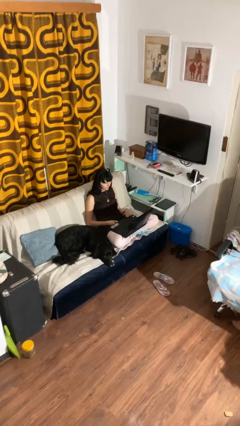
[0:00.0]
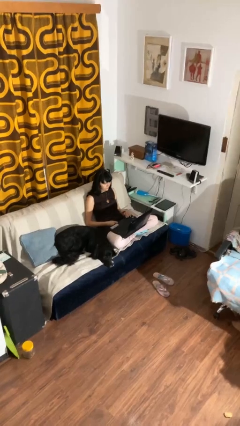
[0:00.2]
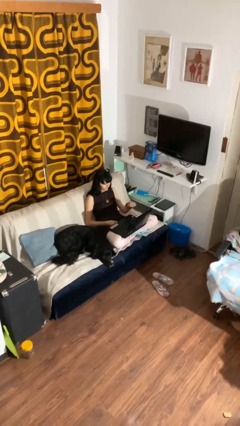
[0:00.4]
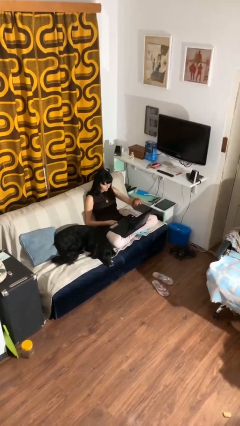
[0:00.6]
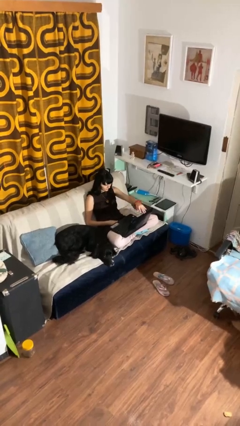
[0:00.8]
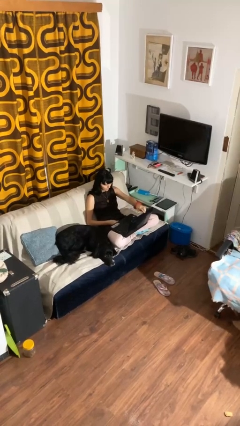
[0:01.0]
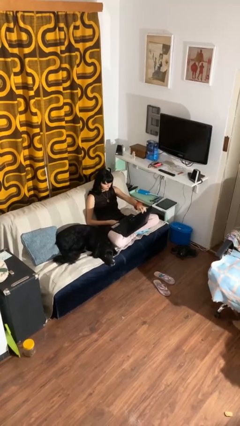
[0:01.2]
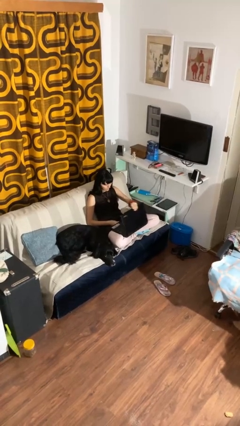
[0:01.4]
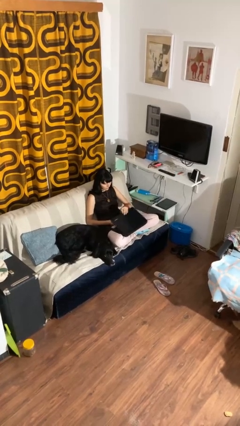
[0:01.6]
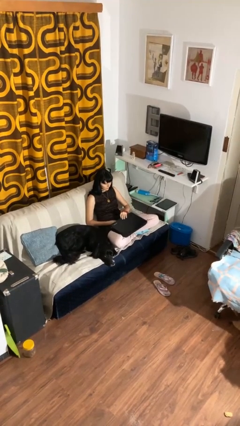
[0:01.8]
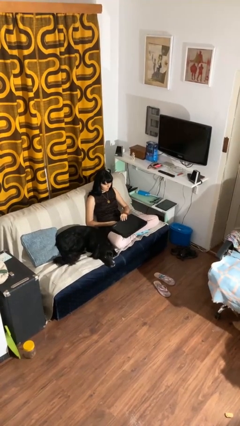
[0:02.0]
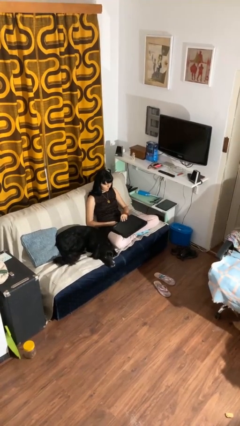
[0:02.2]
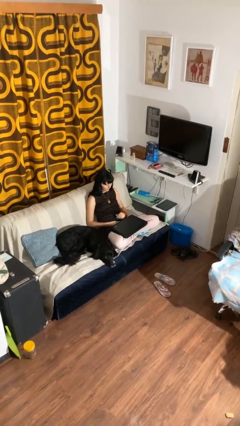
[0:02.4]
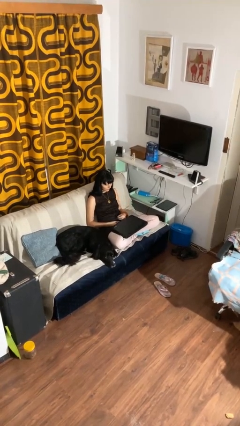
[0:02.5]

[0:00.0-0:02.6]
person closes laptop

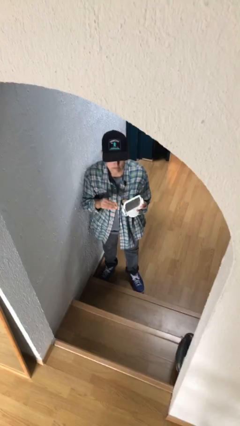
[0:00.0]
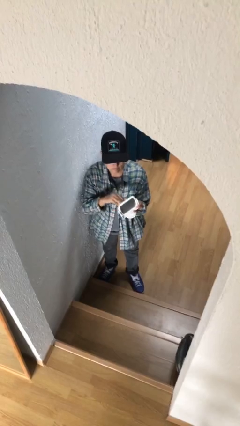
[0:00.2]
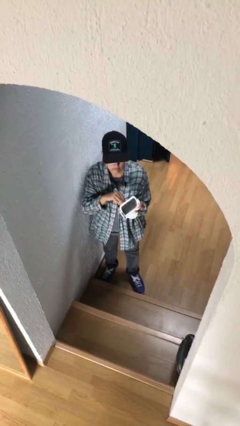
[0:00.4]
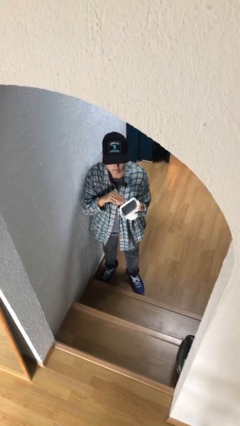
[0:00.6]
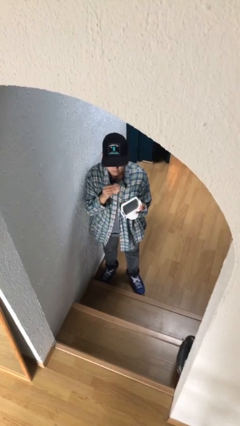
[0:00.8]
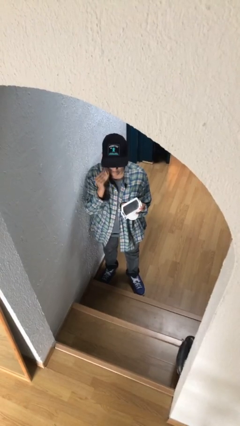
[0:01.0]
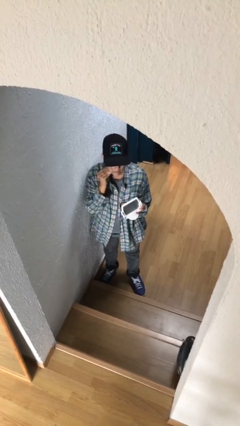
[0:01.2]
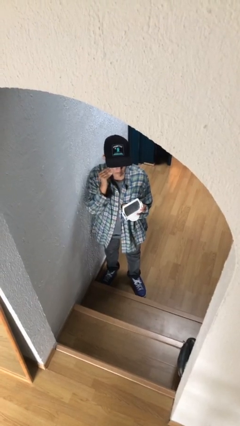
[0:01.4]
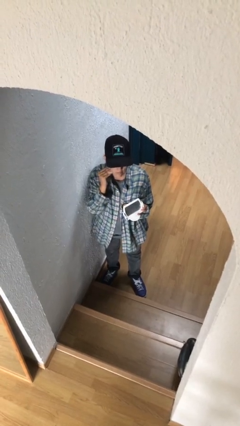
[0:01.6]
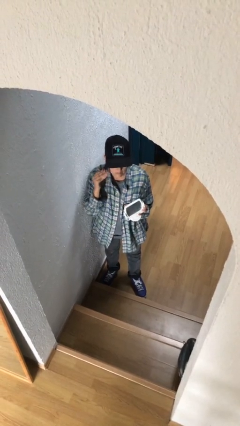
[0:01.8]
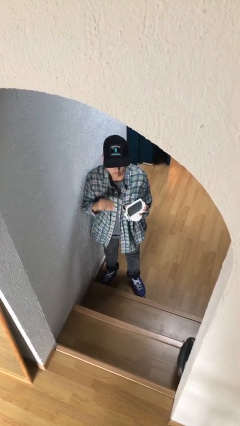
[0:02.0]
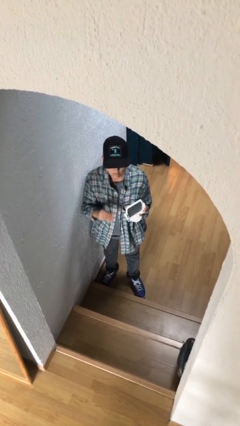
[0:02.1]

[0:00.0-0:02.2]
person applies foundation makeup

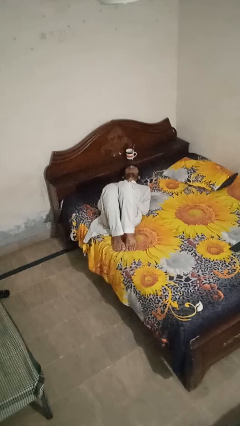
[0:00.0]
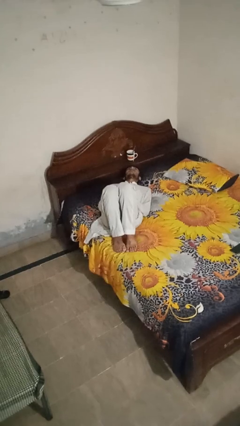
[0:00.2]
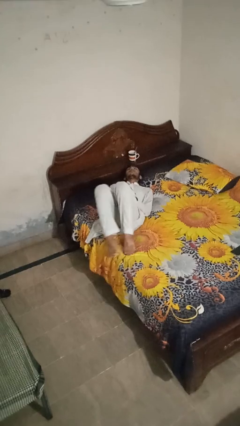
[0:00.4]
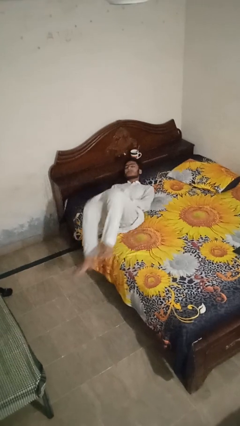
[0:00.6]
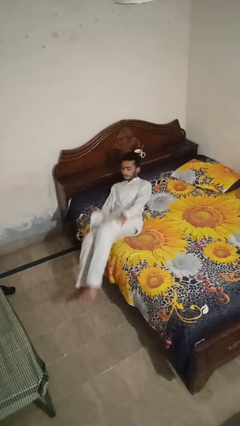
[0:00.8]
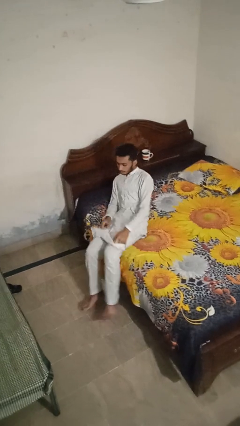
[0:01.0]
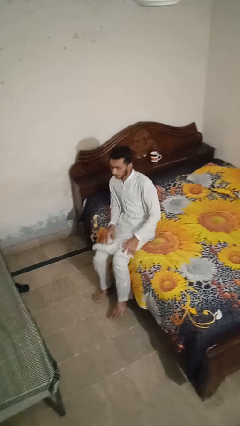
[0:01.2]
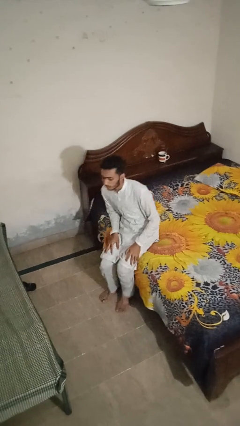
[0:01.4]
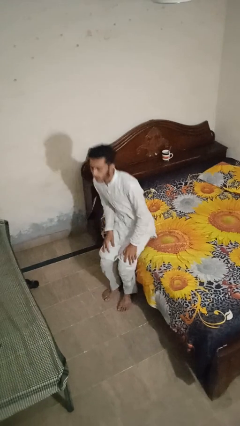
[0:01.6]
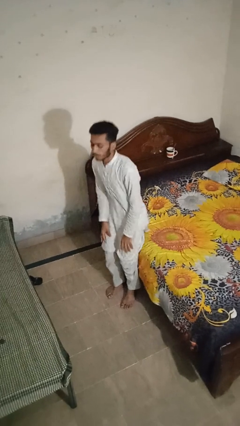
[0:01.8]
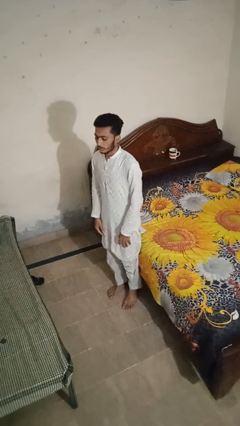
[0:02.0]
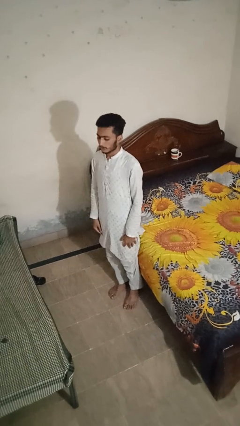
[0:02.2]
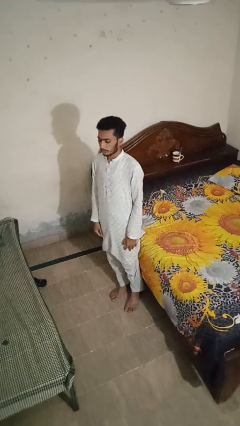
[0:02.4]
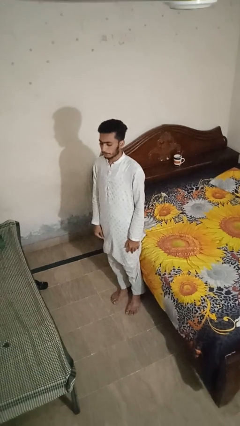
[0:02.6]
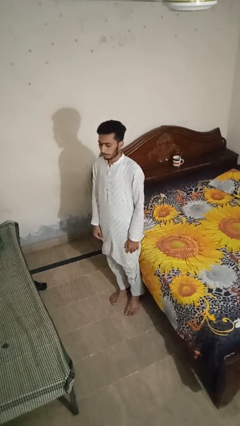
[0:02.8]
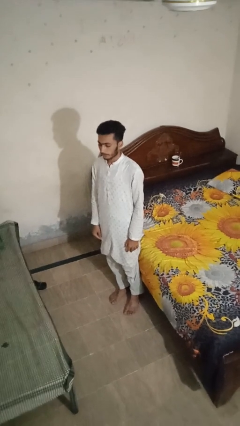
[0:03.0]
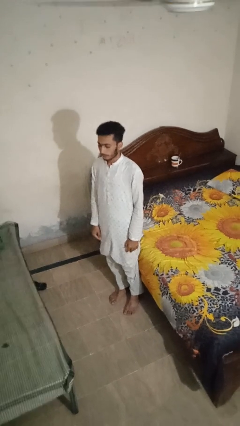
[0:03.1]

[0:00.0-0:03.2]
person stands up

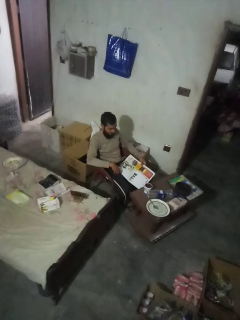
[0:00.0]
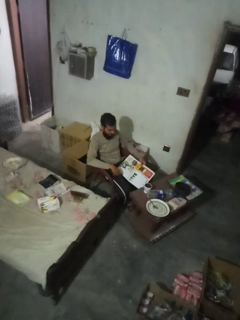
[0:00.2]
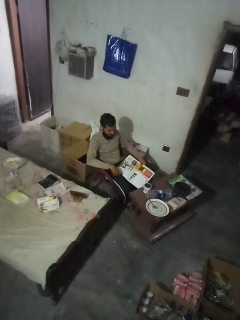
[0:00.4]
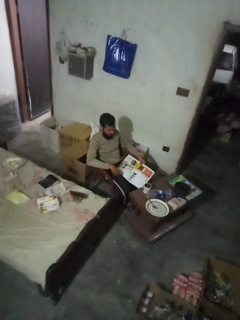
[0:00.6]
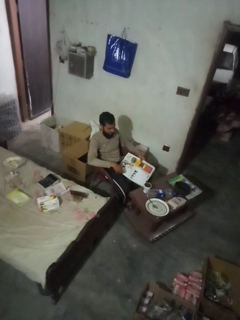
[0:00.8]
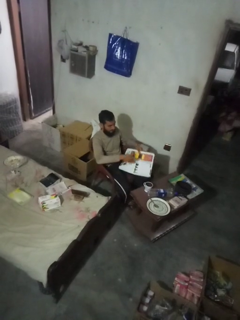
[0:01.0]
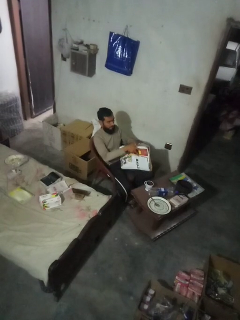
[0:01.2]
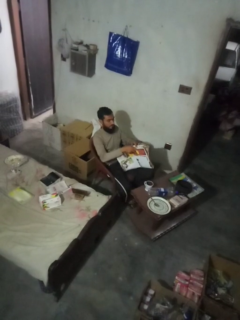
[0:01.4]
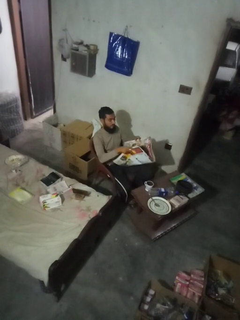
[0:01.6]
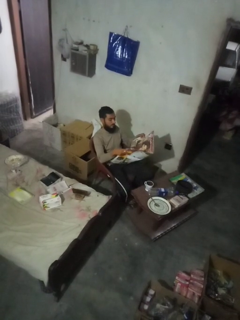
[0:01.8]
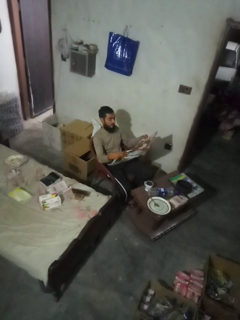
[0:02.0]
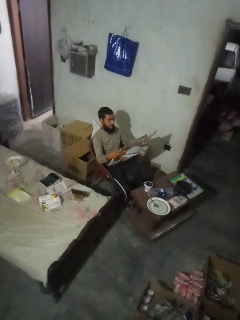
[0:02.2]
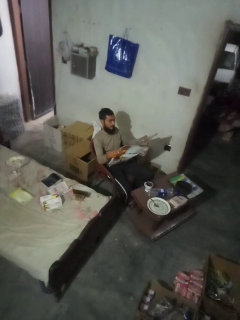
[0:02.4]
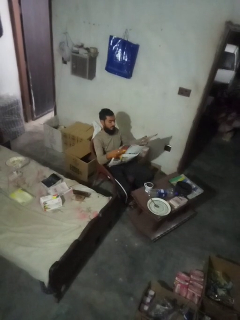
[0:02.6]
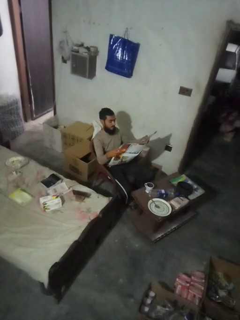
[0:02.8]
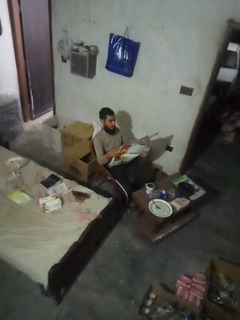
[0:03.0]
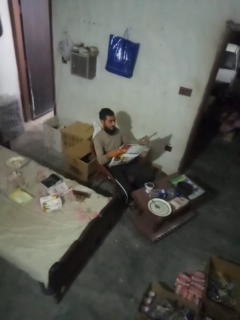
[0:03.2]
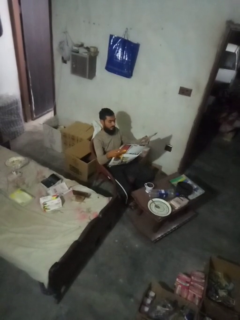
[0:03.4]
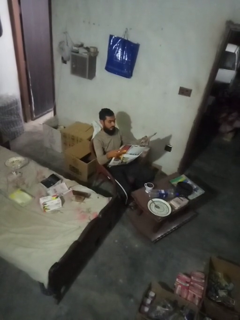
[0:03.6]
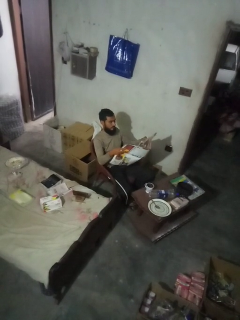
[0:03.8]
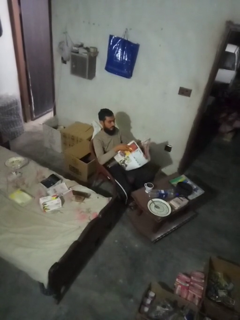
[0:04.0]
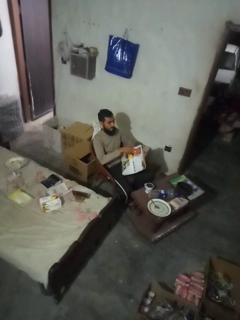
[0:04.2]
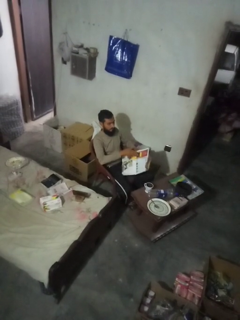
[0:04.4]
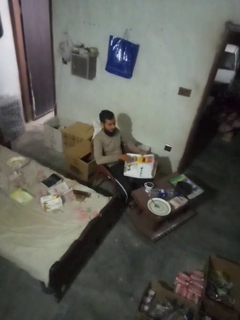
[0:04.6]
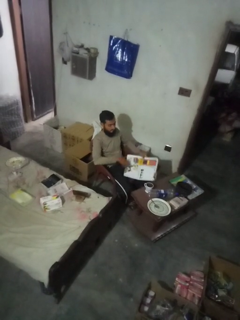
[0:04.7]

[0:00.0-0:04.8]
person reads newspaper

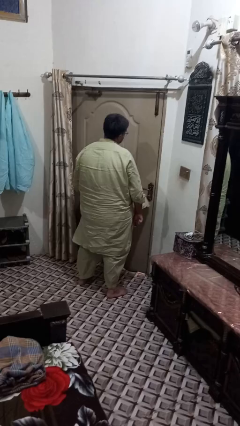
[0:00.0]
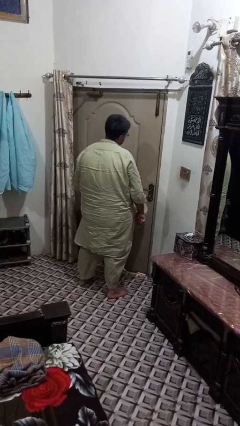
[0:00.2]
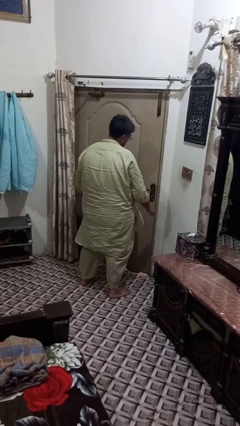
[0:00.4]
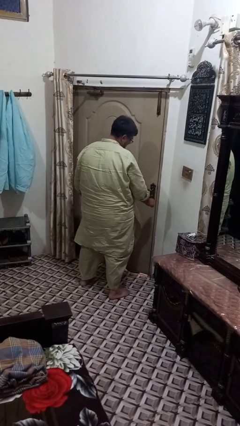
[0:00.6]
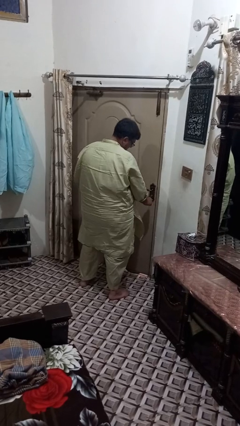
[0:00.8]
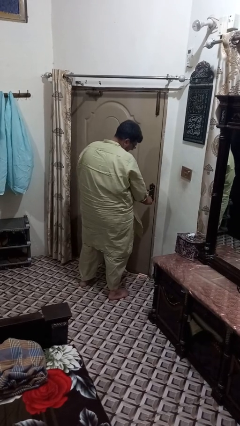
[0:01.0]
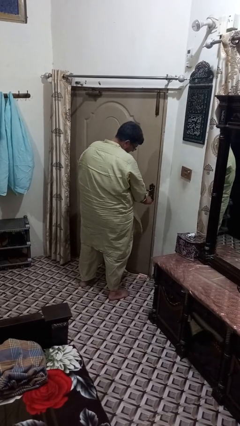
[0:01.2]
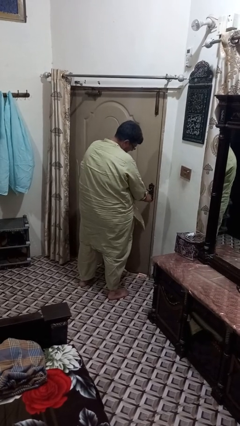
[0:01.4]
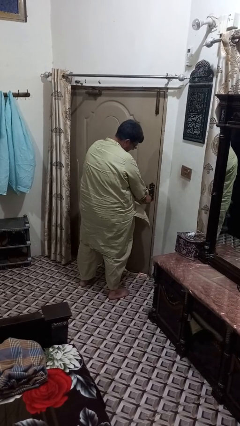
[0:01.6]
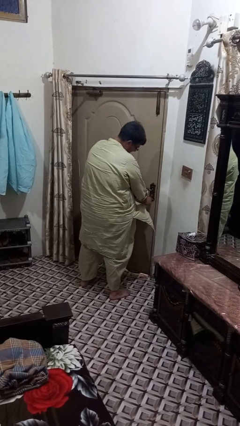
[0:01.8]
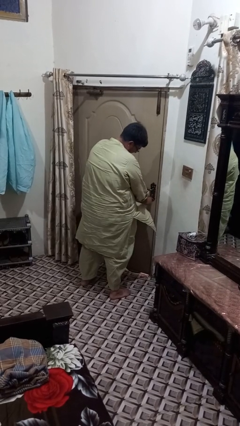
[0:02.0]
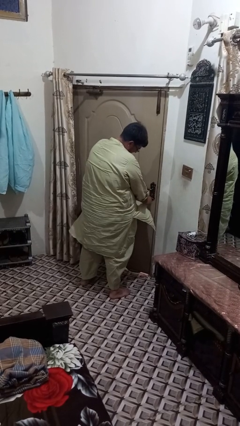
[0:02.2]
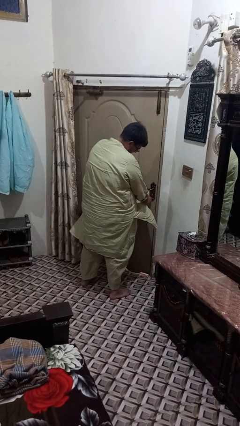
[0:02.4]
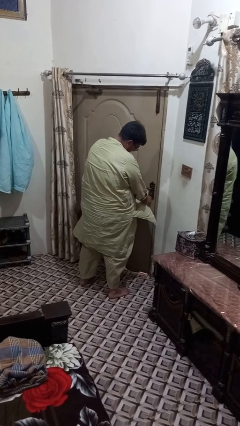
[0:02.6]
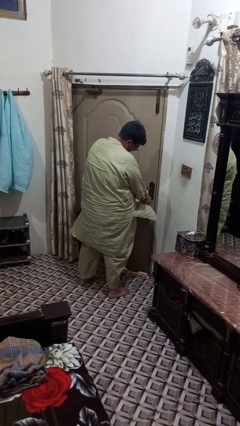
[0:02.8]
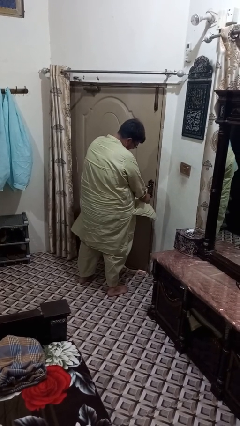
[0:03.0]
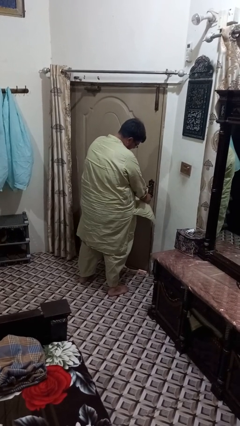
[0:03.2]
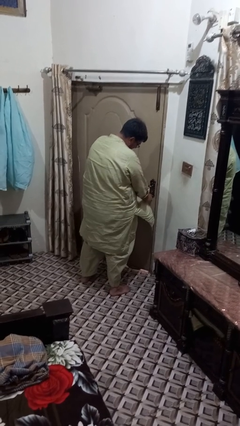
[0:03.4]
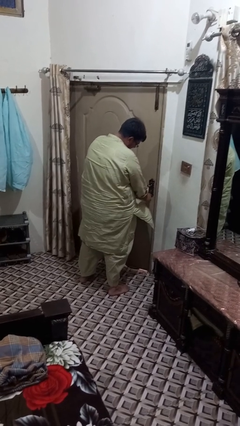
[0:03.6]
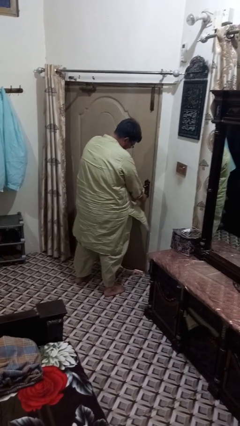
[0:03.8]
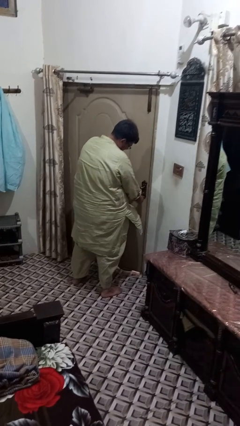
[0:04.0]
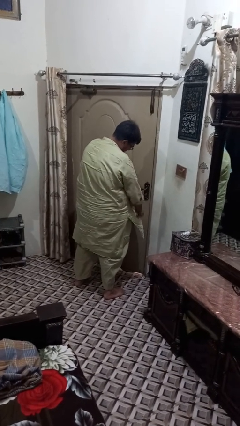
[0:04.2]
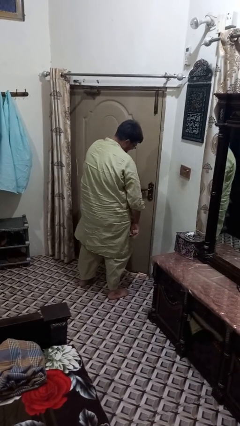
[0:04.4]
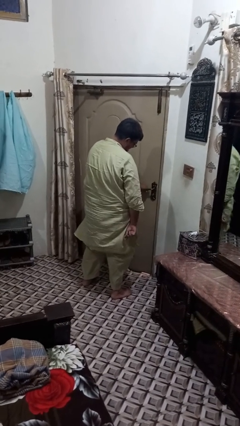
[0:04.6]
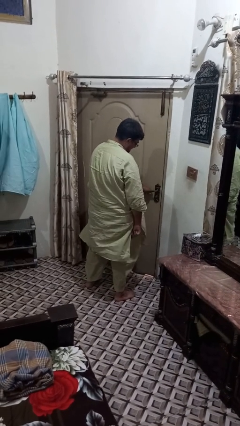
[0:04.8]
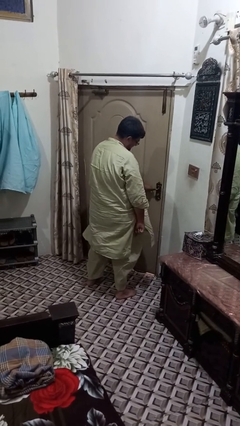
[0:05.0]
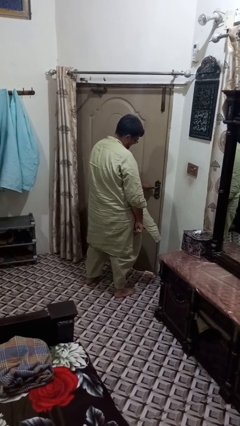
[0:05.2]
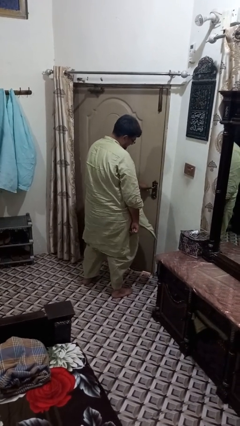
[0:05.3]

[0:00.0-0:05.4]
person unlocks door with keys

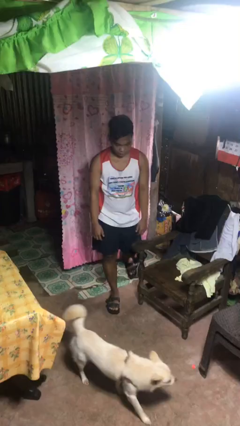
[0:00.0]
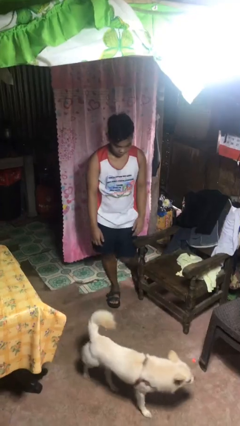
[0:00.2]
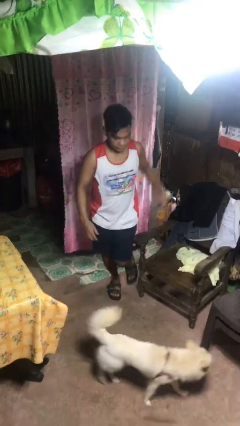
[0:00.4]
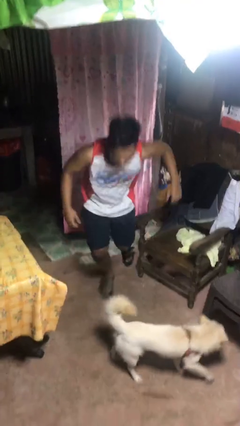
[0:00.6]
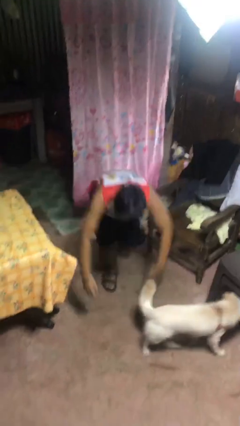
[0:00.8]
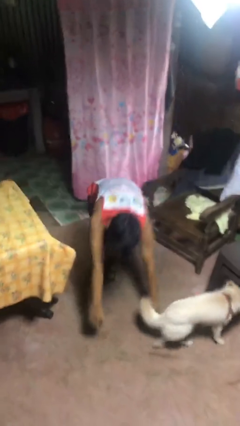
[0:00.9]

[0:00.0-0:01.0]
person trips on object on floor
